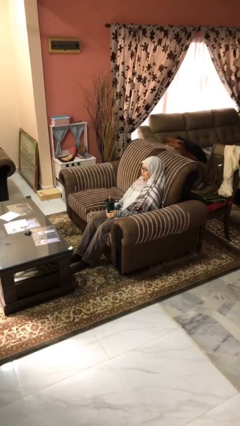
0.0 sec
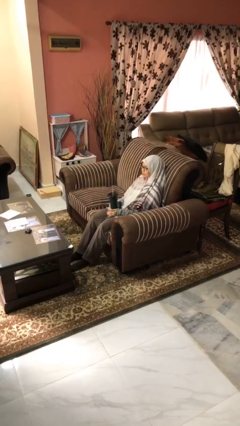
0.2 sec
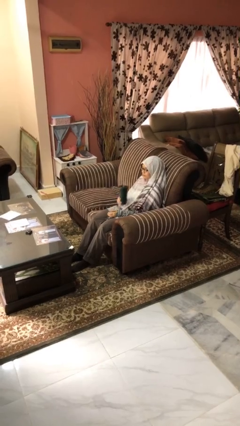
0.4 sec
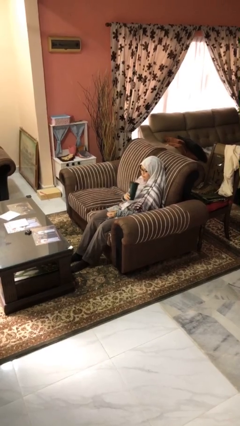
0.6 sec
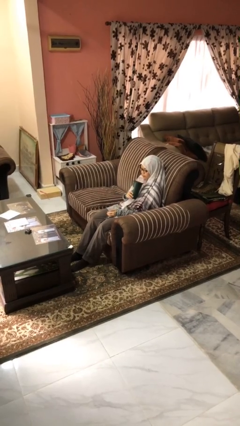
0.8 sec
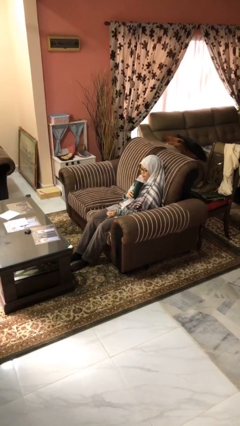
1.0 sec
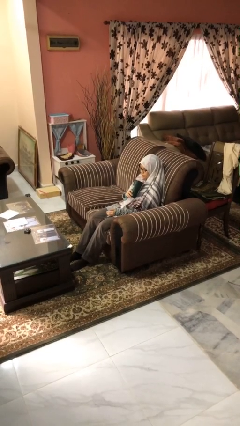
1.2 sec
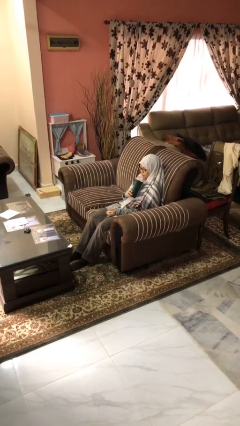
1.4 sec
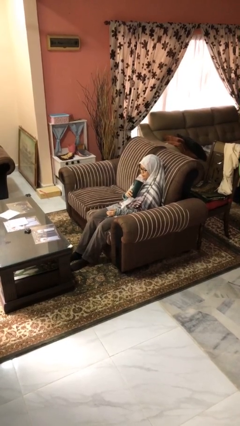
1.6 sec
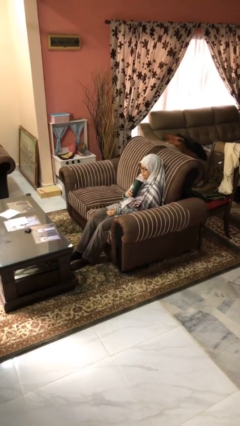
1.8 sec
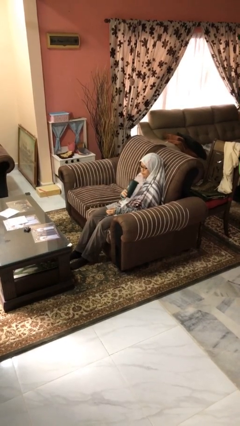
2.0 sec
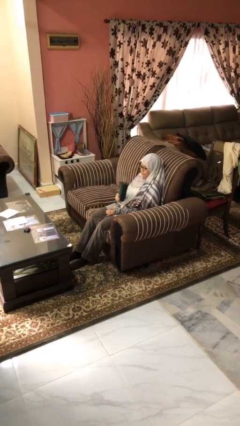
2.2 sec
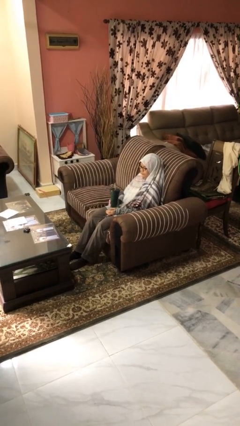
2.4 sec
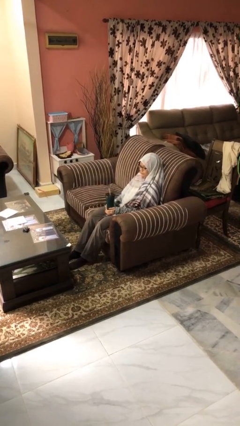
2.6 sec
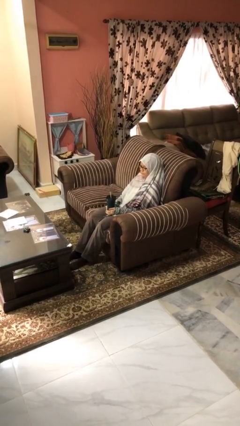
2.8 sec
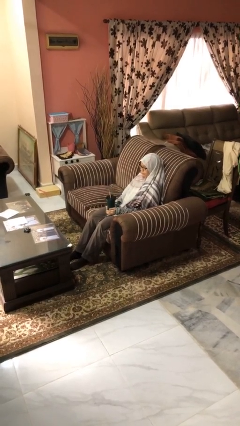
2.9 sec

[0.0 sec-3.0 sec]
person drinks from straw

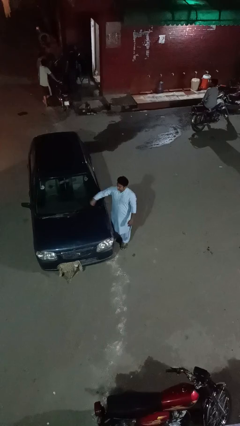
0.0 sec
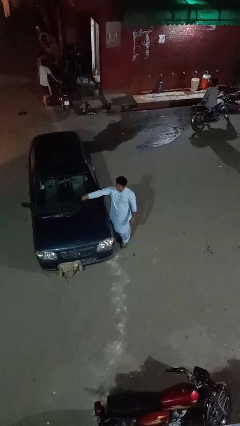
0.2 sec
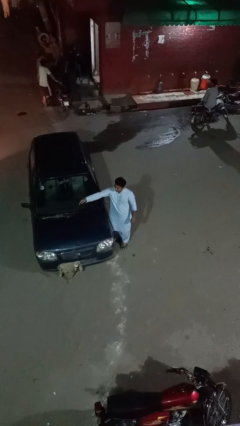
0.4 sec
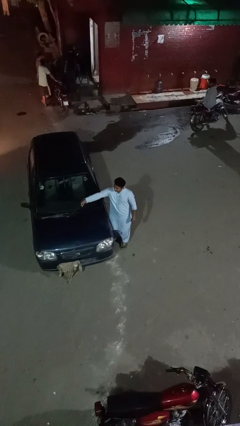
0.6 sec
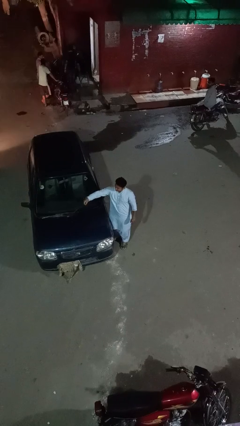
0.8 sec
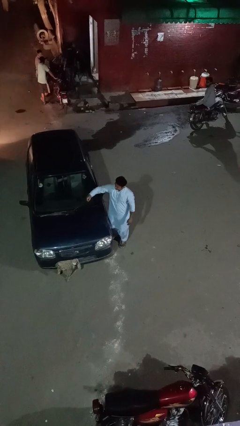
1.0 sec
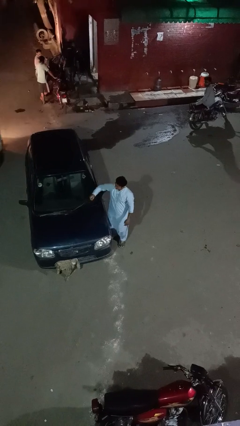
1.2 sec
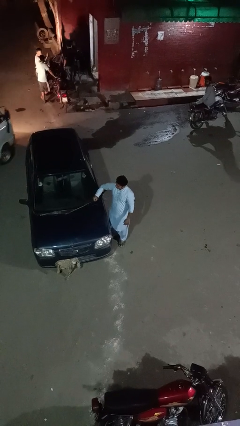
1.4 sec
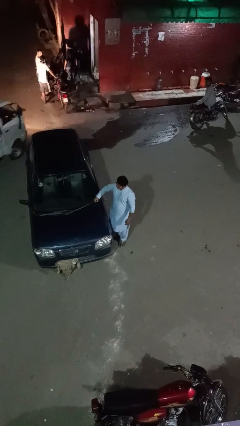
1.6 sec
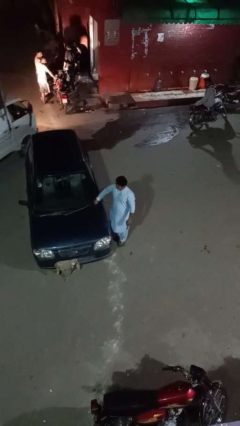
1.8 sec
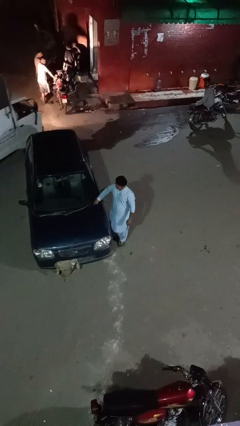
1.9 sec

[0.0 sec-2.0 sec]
person flips down car wipers

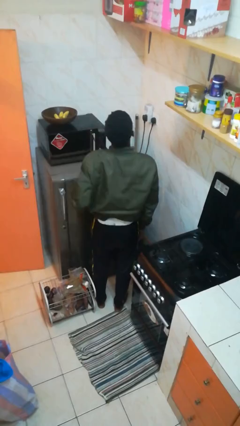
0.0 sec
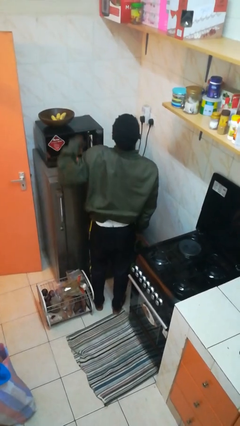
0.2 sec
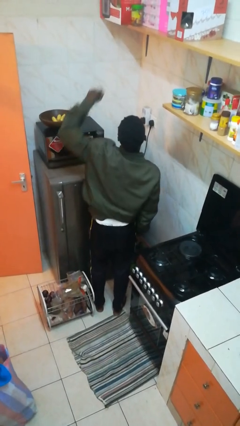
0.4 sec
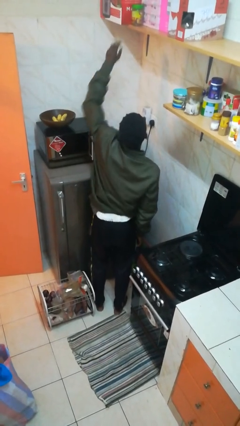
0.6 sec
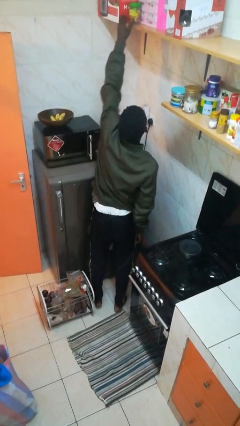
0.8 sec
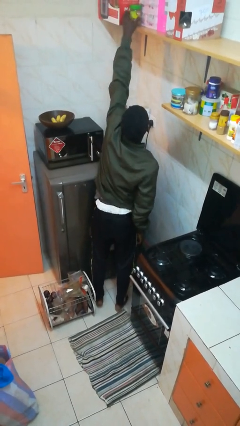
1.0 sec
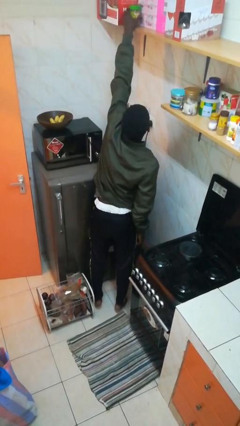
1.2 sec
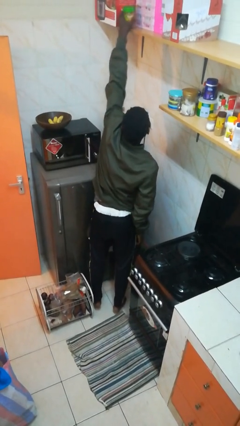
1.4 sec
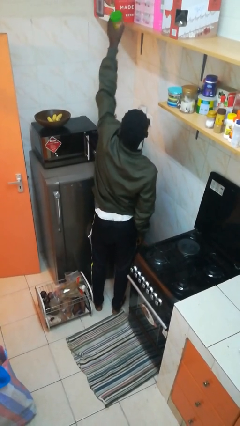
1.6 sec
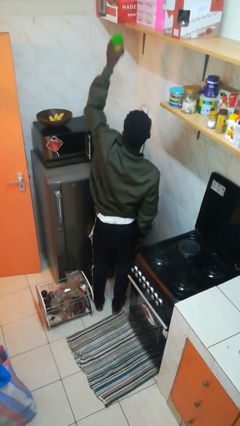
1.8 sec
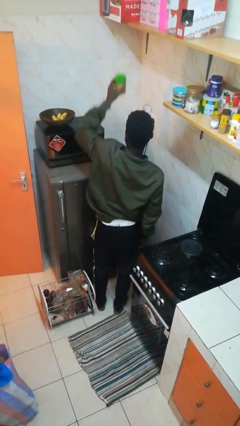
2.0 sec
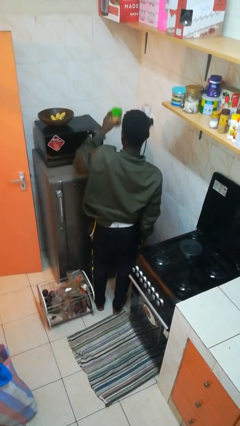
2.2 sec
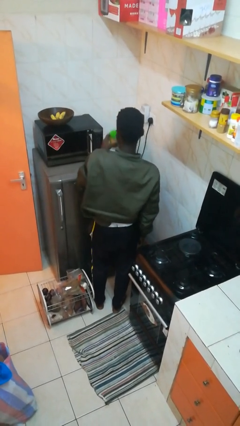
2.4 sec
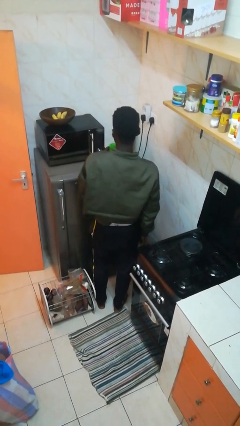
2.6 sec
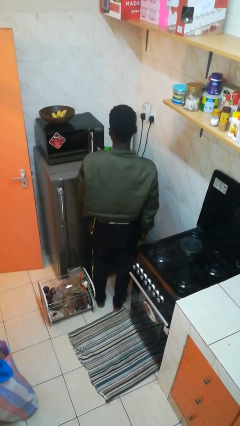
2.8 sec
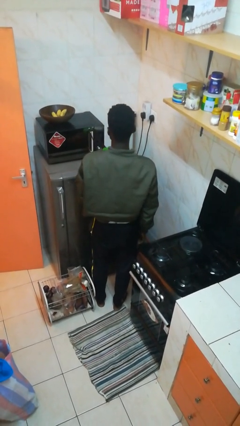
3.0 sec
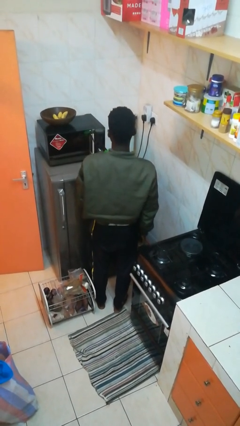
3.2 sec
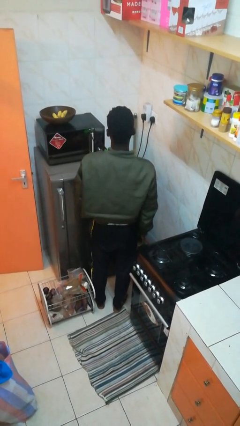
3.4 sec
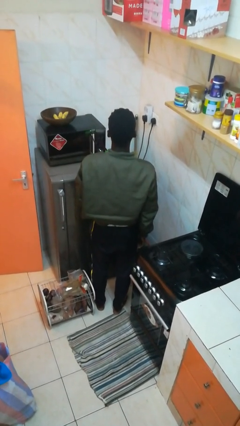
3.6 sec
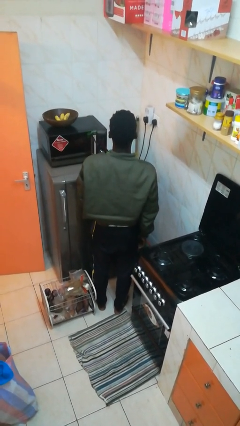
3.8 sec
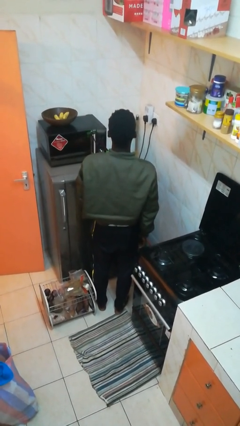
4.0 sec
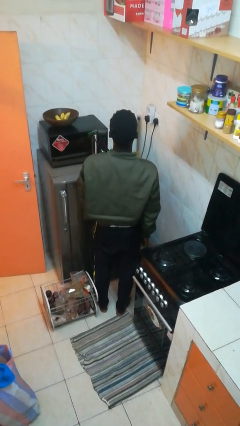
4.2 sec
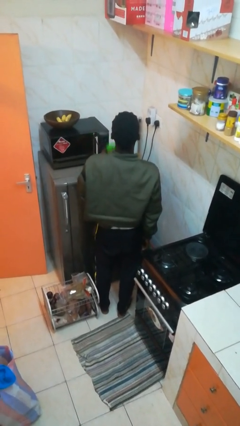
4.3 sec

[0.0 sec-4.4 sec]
person picks up object from shelf

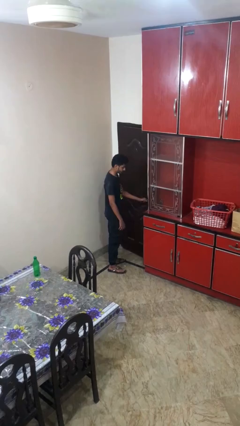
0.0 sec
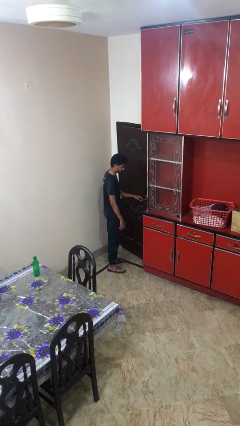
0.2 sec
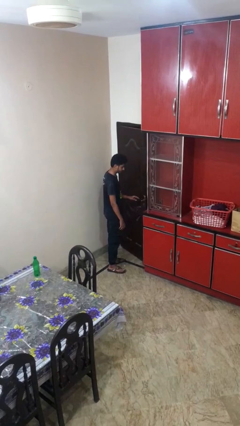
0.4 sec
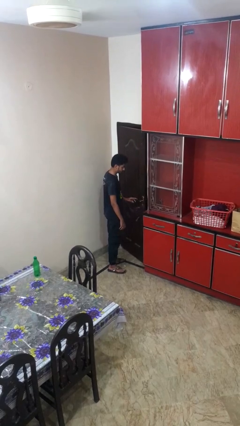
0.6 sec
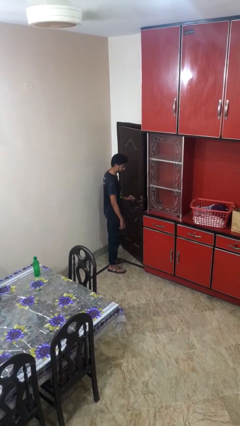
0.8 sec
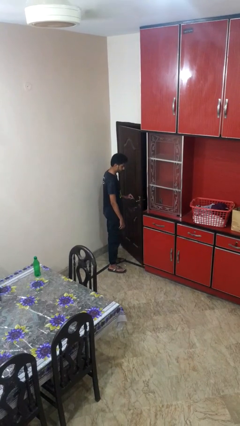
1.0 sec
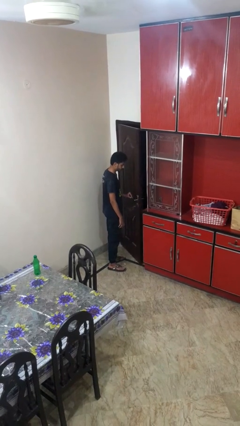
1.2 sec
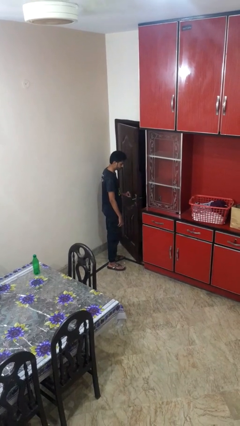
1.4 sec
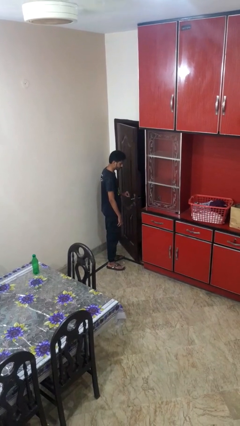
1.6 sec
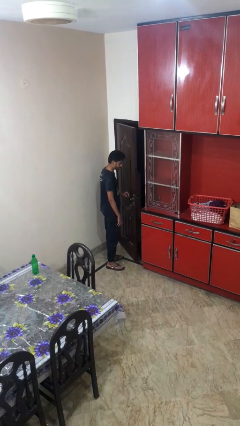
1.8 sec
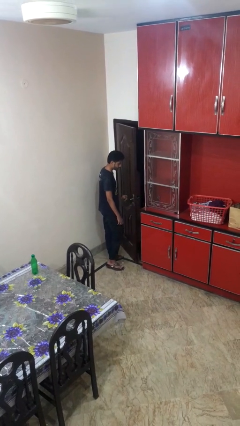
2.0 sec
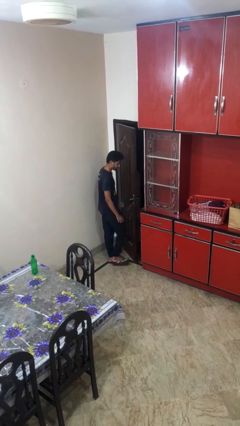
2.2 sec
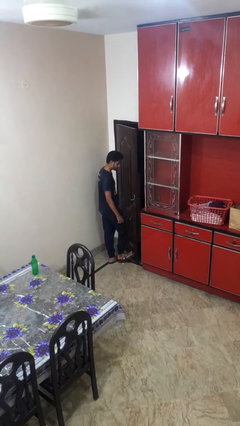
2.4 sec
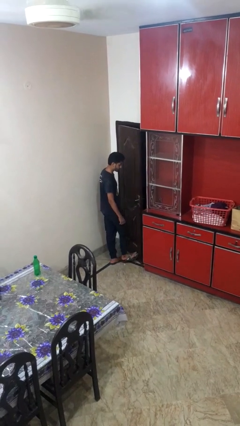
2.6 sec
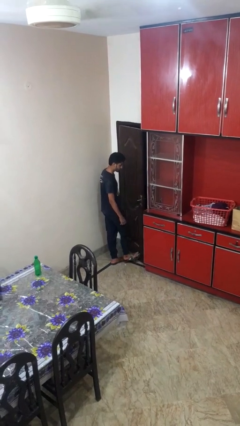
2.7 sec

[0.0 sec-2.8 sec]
person opens facility door

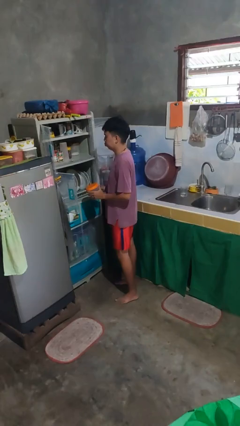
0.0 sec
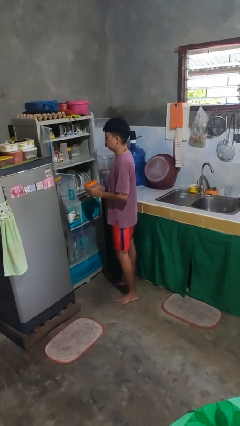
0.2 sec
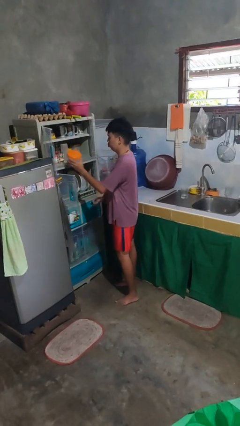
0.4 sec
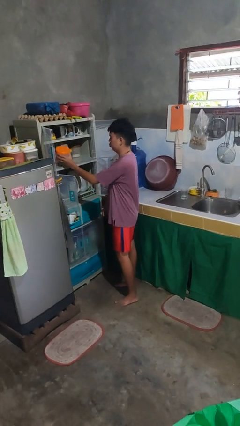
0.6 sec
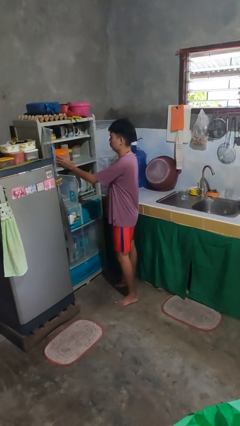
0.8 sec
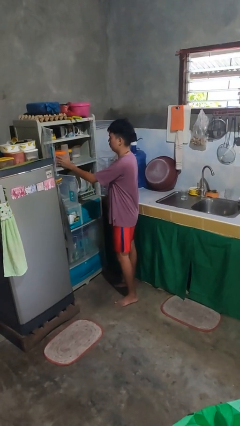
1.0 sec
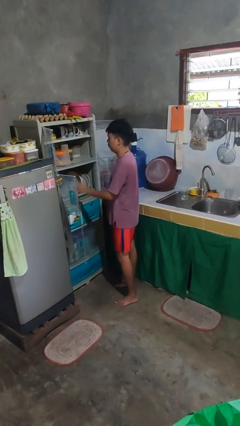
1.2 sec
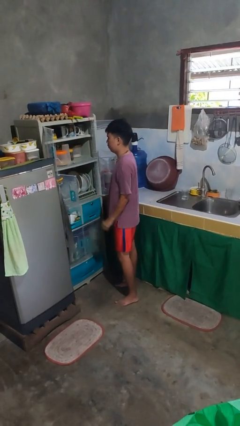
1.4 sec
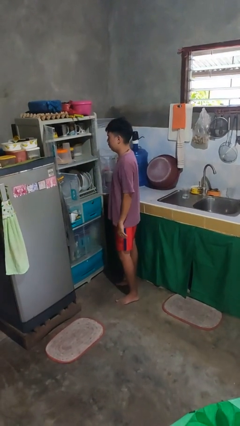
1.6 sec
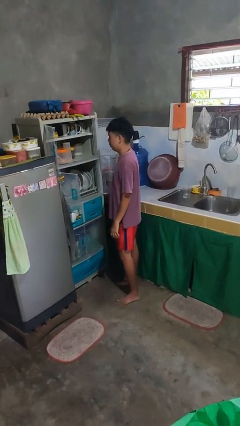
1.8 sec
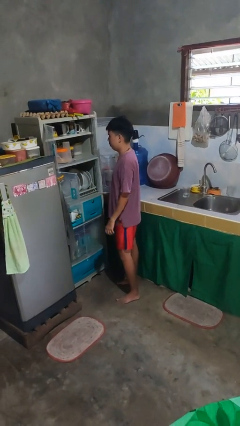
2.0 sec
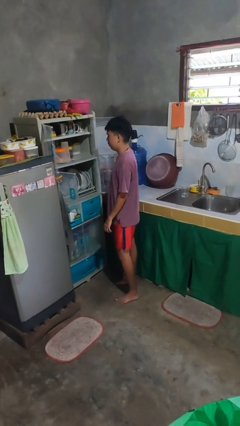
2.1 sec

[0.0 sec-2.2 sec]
person puts object in cabinet

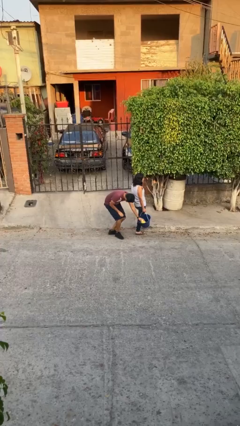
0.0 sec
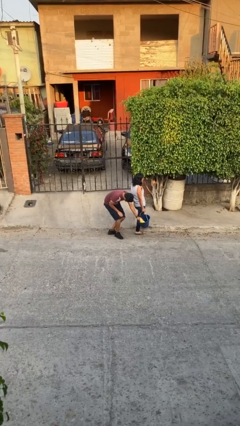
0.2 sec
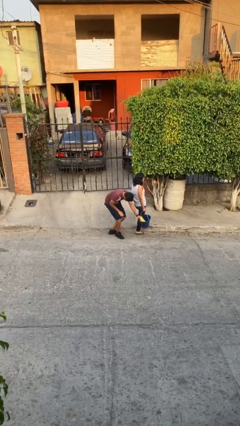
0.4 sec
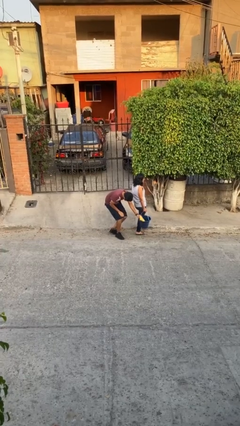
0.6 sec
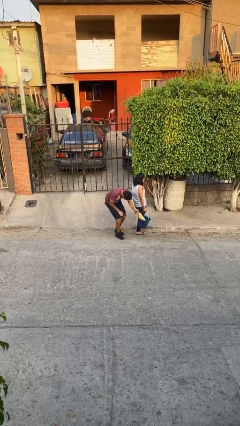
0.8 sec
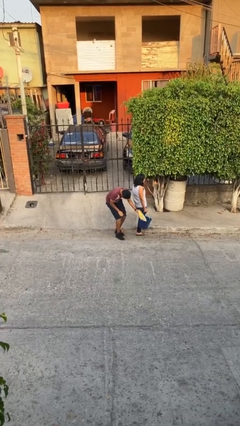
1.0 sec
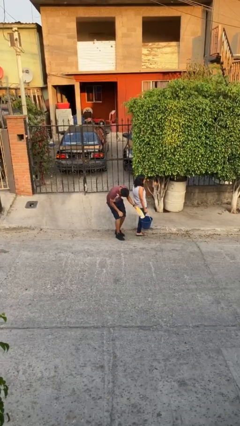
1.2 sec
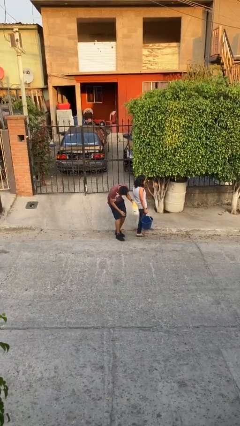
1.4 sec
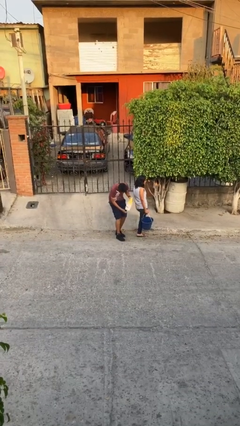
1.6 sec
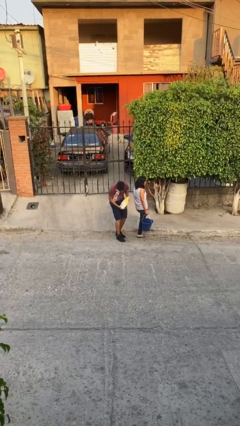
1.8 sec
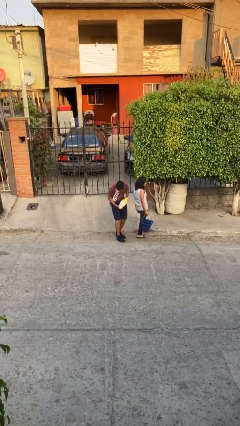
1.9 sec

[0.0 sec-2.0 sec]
person steals object from person

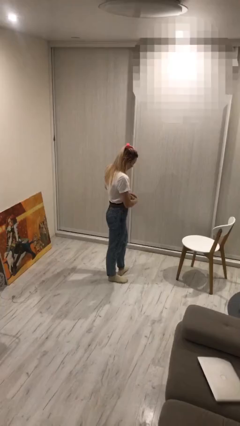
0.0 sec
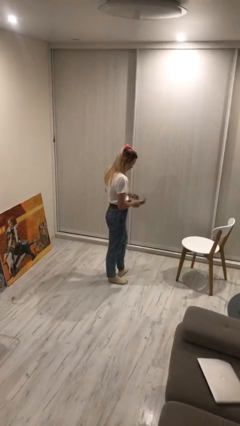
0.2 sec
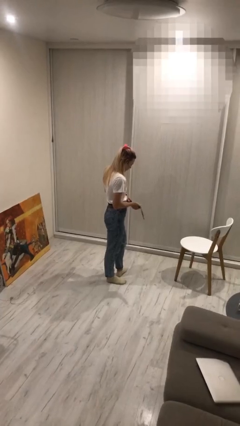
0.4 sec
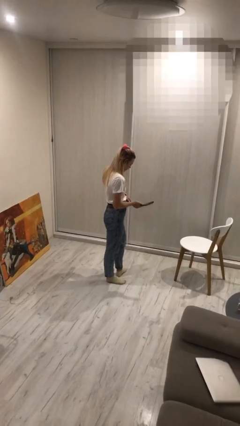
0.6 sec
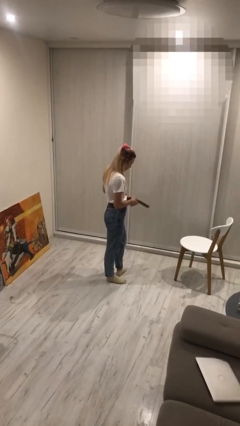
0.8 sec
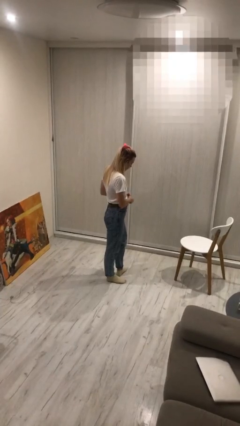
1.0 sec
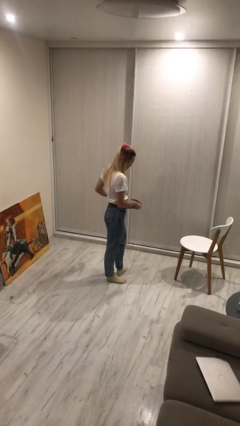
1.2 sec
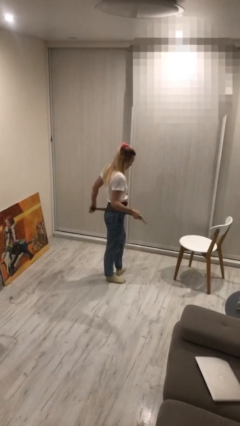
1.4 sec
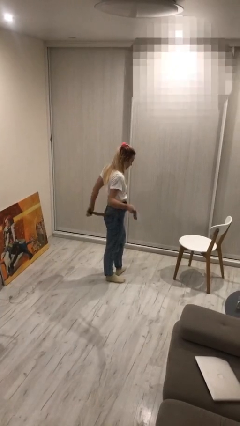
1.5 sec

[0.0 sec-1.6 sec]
person takes off belt
